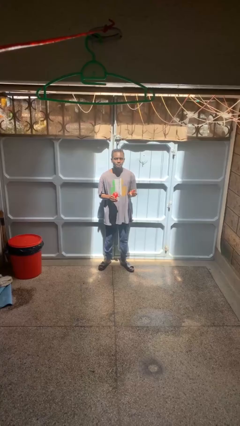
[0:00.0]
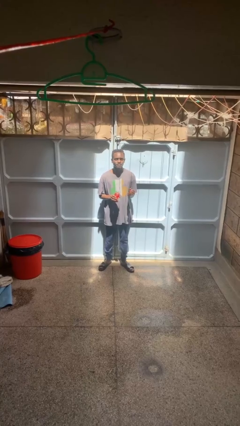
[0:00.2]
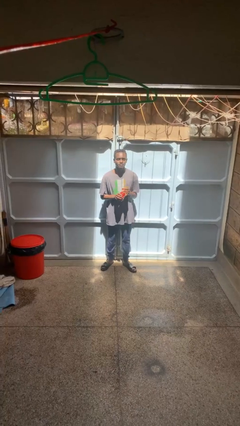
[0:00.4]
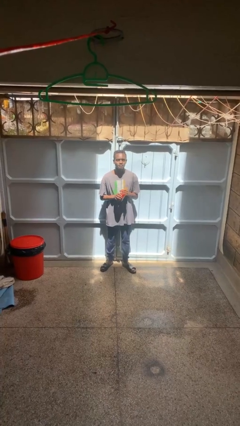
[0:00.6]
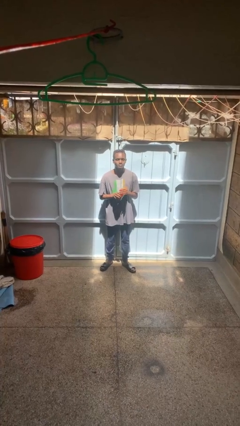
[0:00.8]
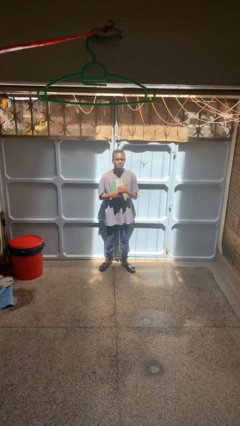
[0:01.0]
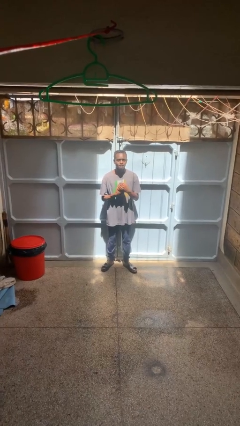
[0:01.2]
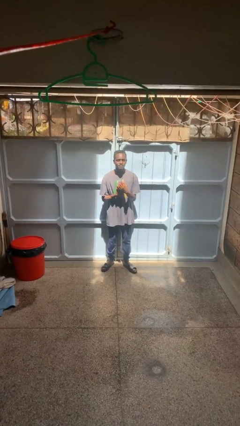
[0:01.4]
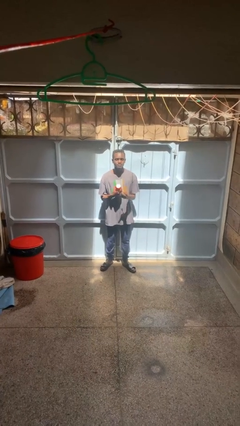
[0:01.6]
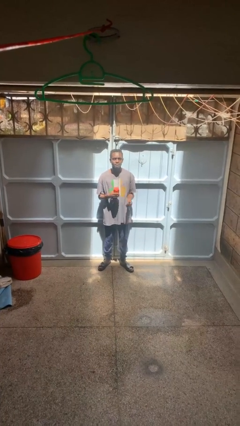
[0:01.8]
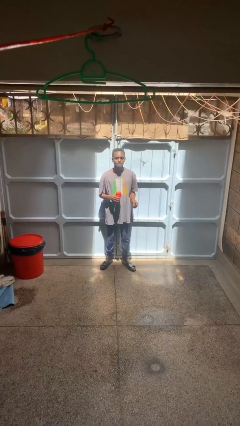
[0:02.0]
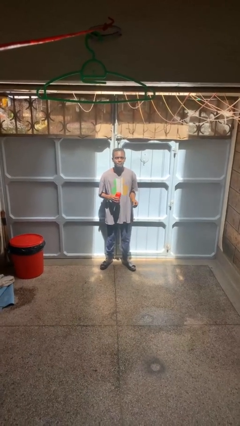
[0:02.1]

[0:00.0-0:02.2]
person closes jar

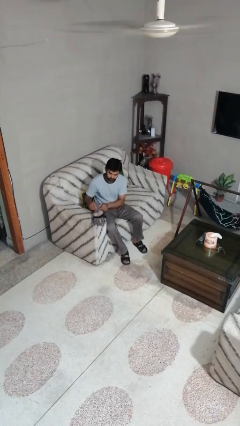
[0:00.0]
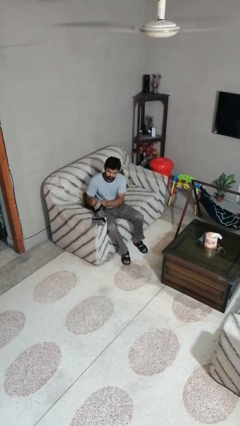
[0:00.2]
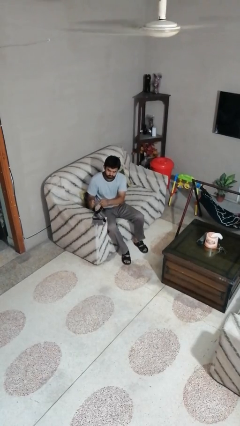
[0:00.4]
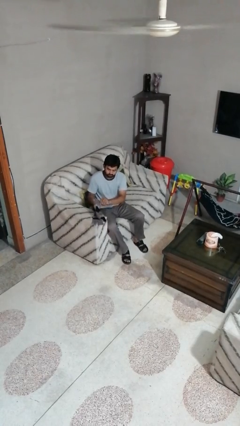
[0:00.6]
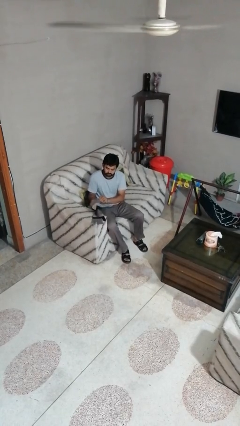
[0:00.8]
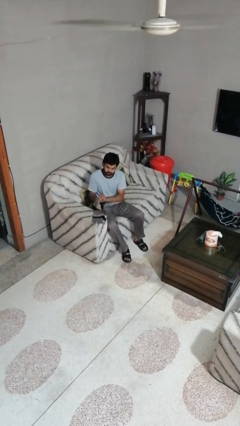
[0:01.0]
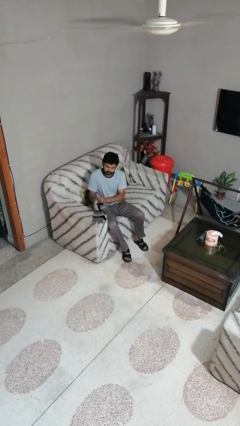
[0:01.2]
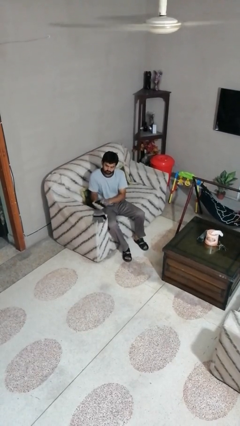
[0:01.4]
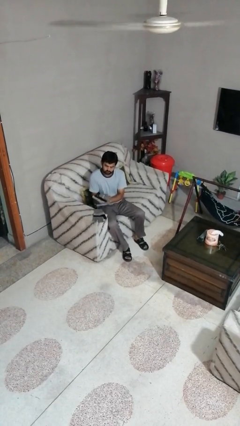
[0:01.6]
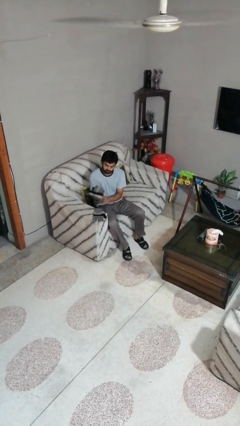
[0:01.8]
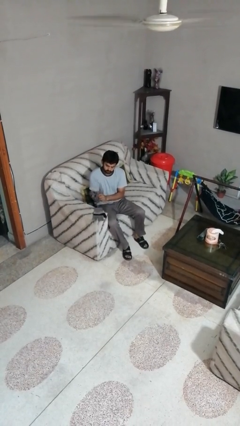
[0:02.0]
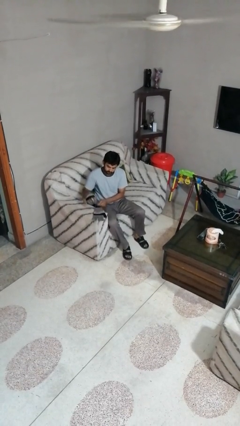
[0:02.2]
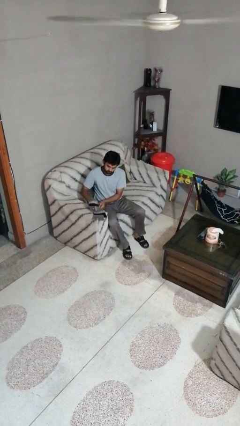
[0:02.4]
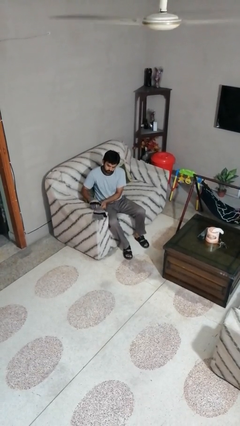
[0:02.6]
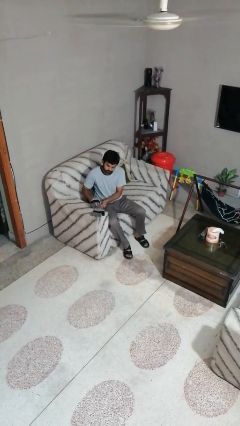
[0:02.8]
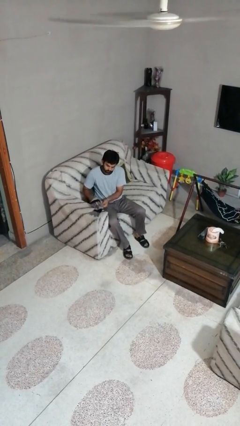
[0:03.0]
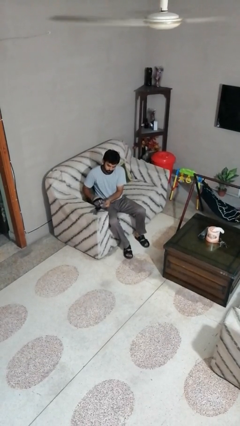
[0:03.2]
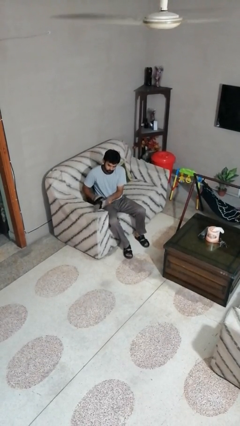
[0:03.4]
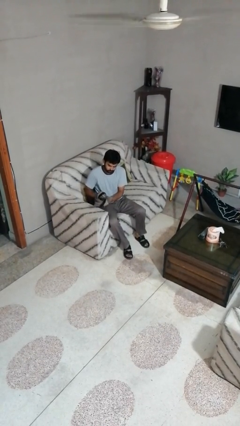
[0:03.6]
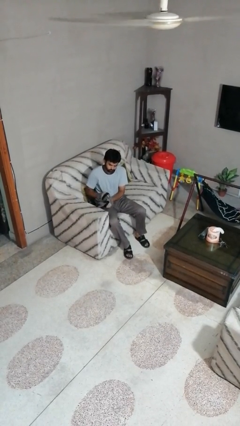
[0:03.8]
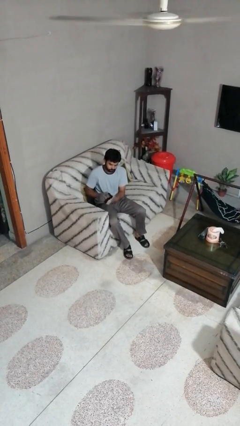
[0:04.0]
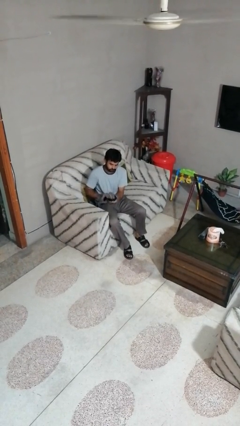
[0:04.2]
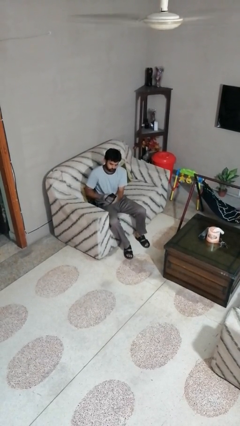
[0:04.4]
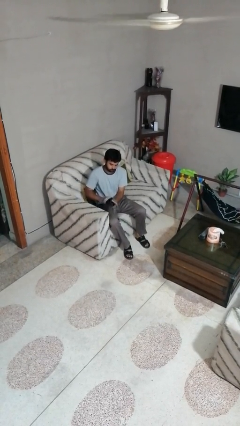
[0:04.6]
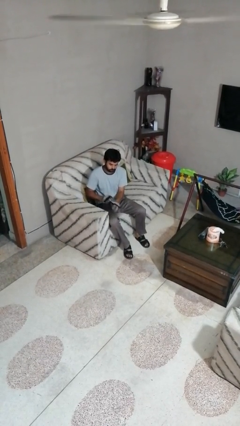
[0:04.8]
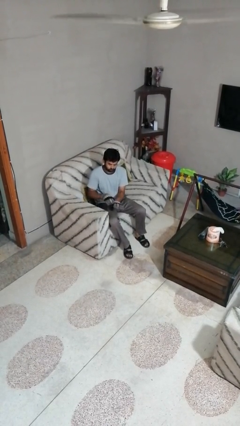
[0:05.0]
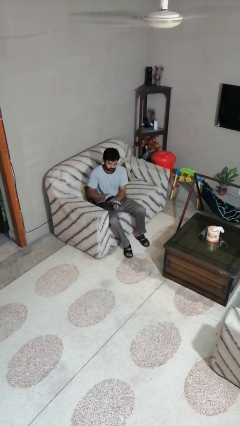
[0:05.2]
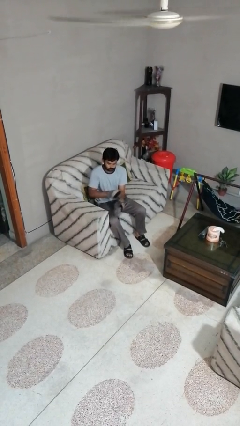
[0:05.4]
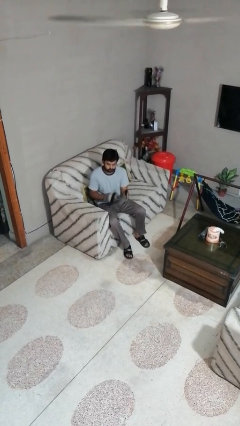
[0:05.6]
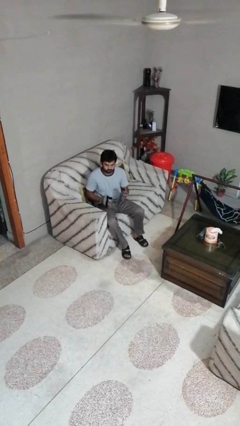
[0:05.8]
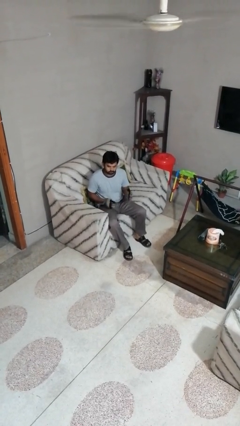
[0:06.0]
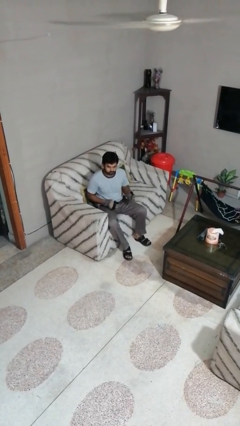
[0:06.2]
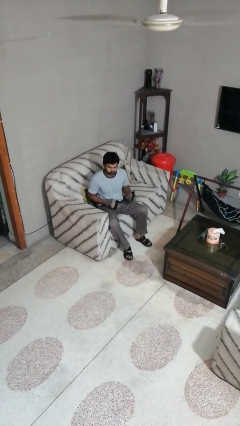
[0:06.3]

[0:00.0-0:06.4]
person puts on gloves

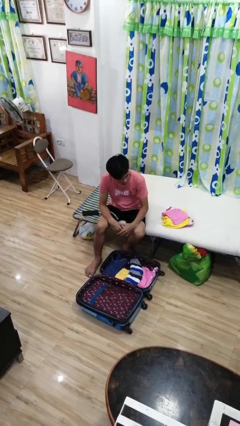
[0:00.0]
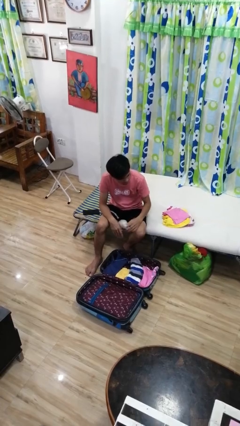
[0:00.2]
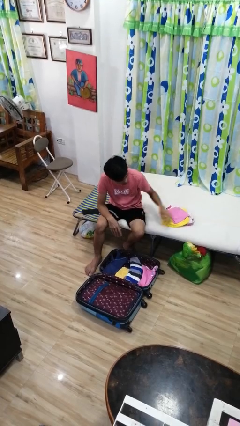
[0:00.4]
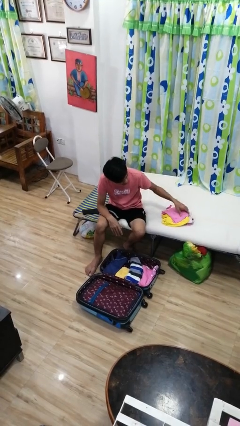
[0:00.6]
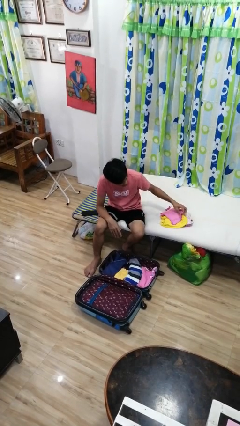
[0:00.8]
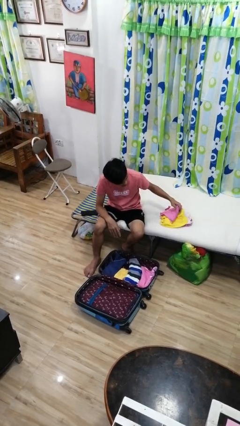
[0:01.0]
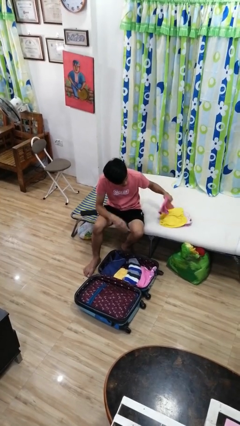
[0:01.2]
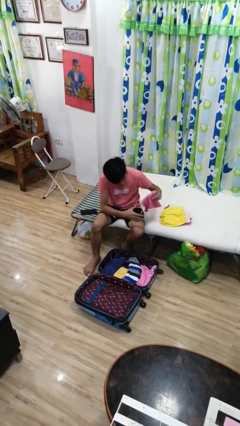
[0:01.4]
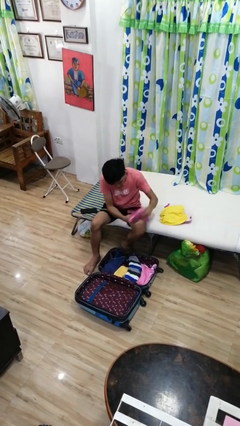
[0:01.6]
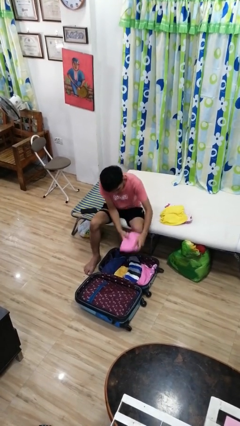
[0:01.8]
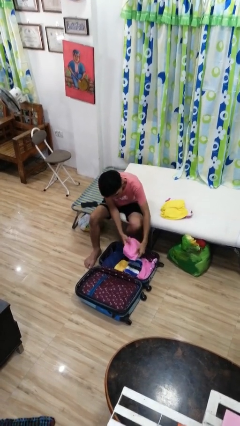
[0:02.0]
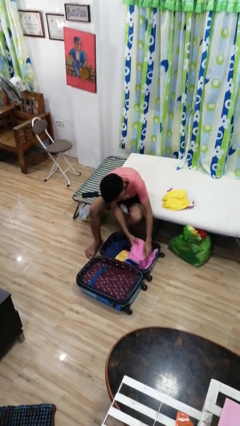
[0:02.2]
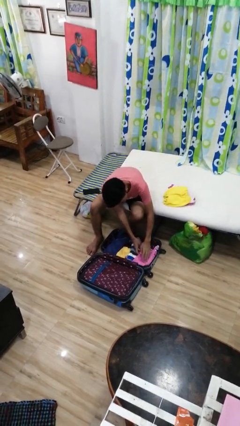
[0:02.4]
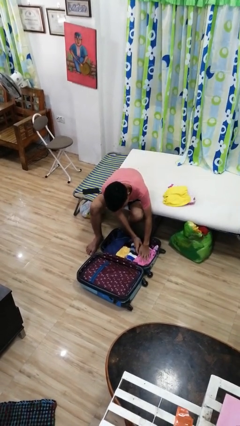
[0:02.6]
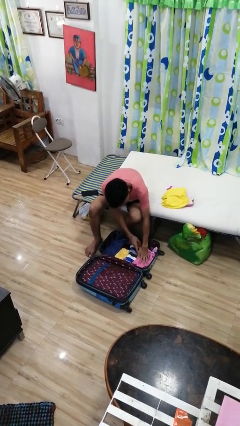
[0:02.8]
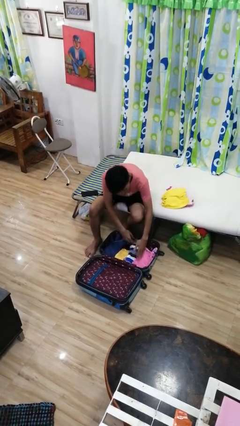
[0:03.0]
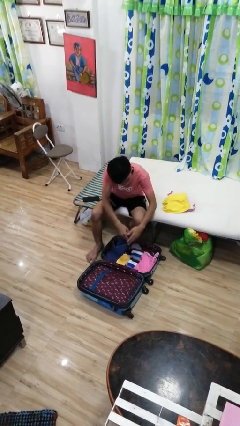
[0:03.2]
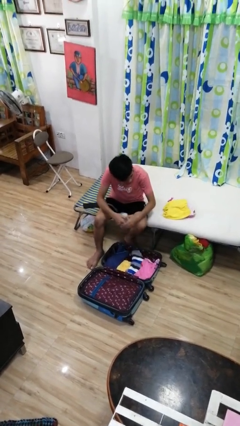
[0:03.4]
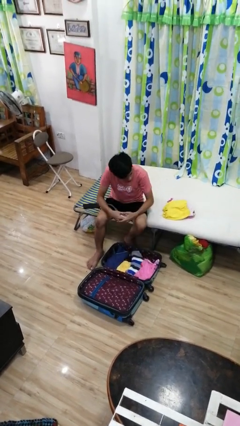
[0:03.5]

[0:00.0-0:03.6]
person loads clothes into suitcase

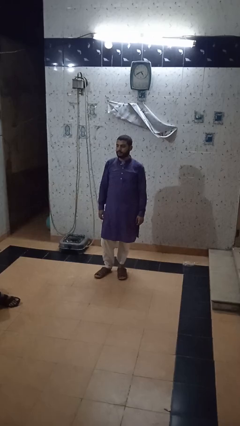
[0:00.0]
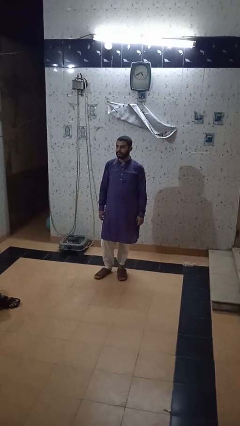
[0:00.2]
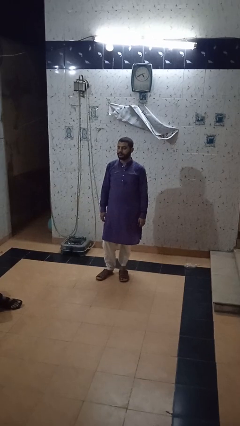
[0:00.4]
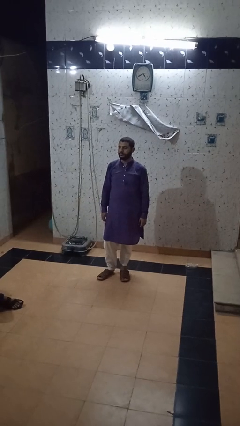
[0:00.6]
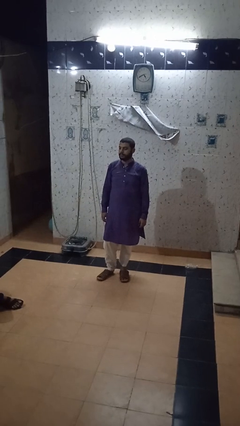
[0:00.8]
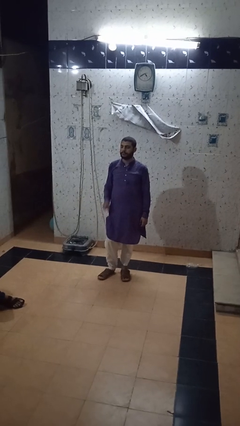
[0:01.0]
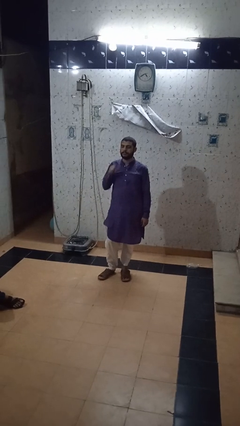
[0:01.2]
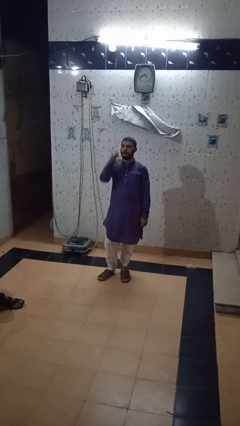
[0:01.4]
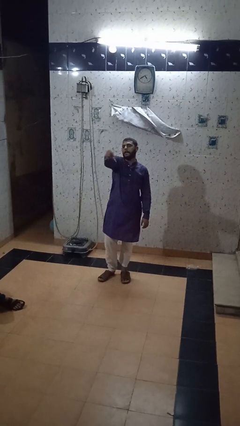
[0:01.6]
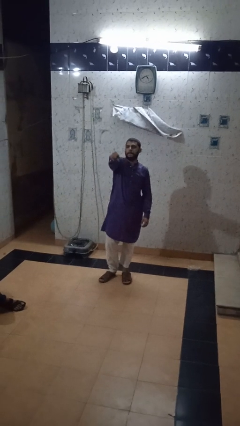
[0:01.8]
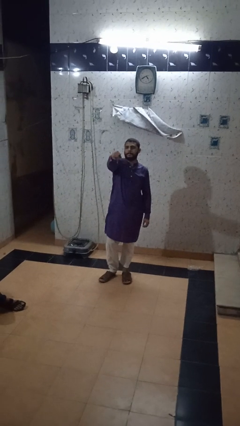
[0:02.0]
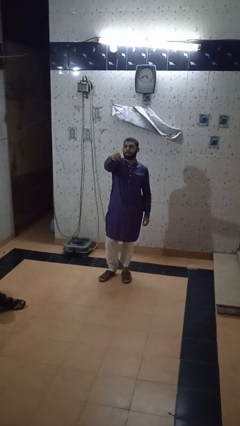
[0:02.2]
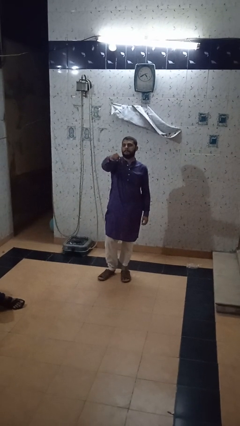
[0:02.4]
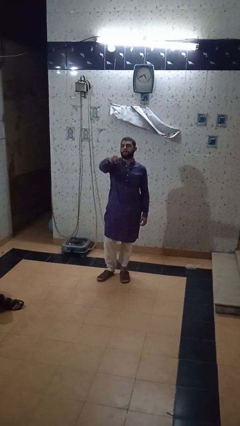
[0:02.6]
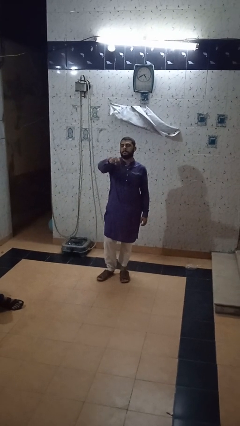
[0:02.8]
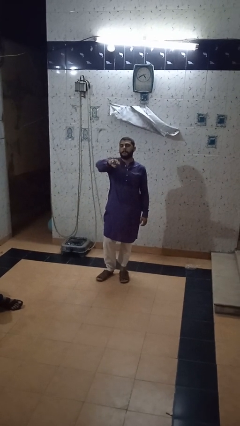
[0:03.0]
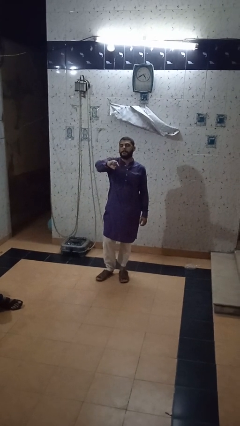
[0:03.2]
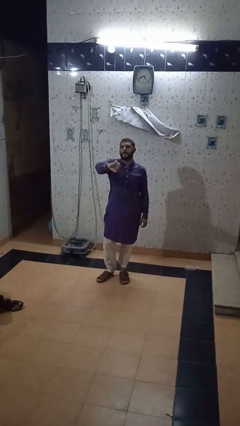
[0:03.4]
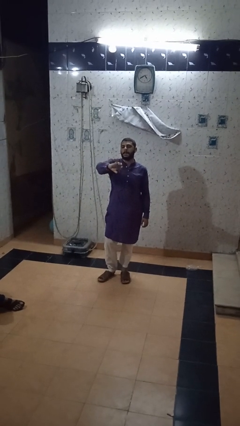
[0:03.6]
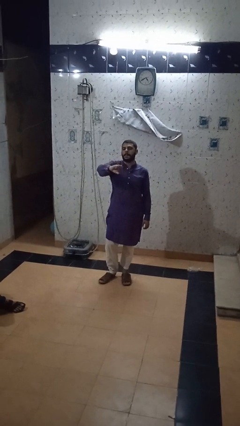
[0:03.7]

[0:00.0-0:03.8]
person punches

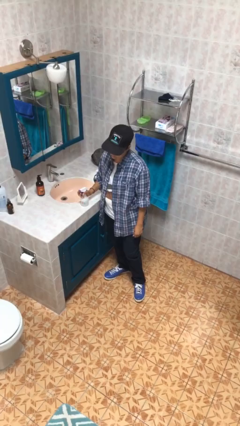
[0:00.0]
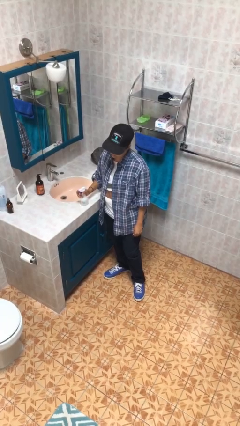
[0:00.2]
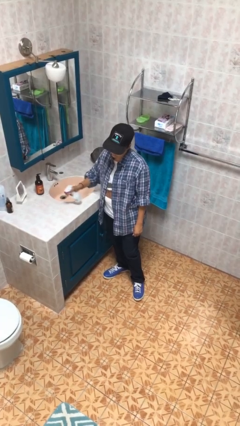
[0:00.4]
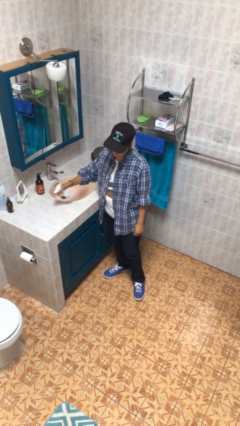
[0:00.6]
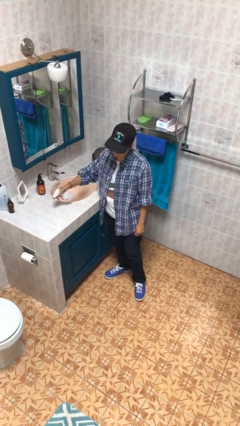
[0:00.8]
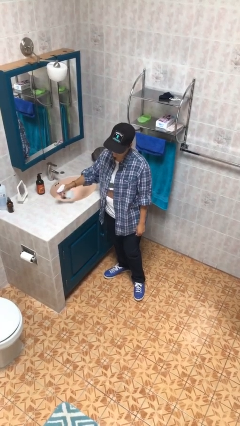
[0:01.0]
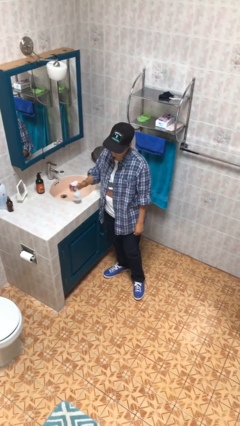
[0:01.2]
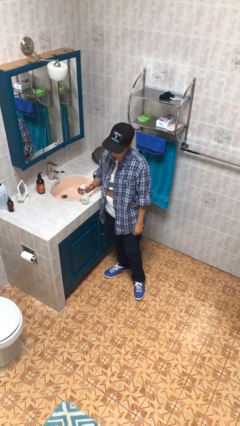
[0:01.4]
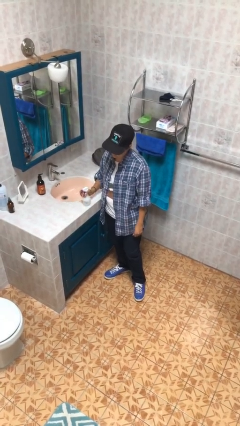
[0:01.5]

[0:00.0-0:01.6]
person sprays from bottle
